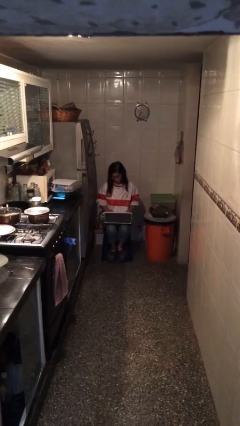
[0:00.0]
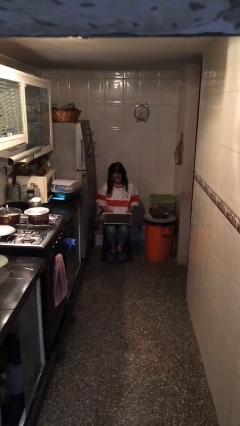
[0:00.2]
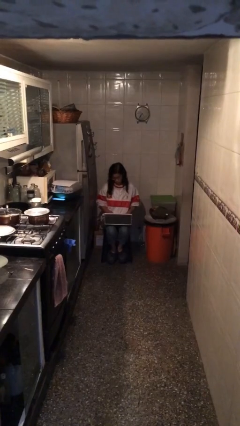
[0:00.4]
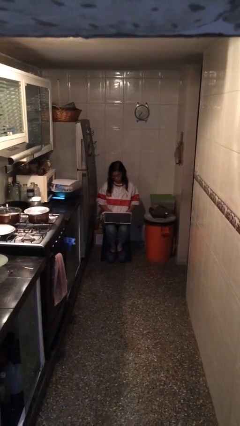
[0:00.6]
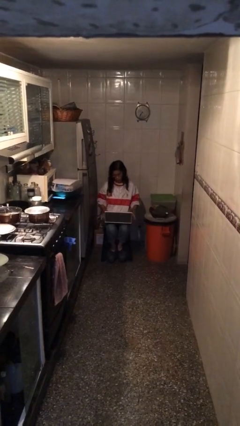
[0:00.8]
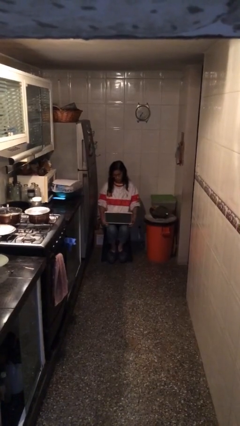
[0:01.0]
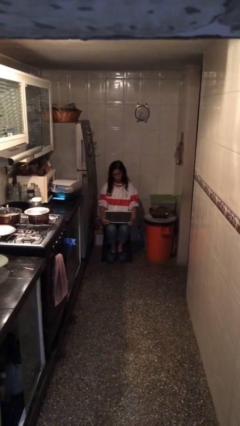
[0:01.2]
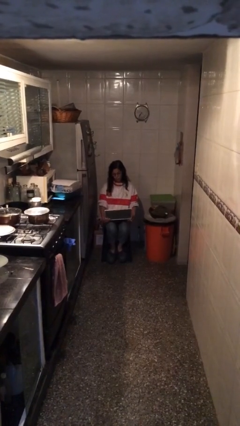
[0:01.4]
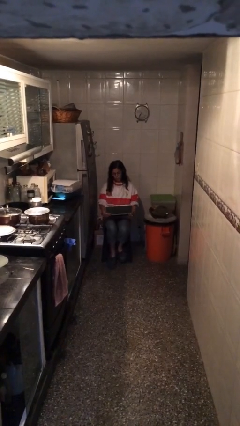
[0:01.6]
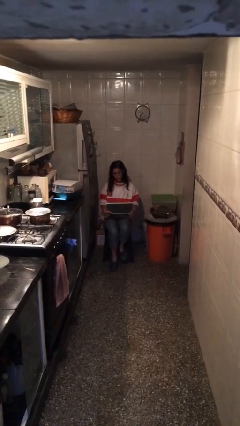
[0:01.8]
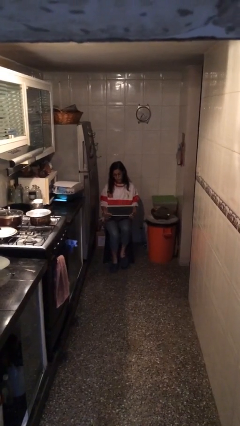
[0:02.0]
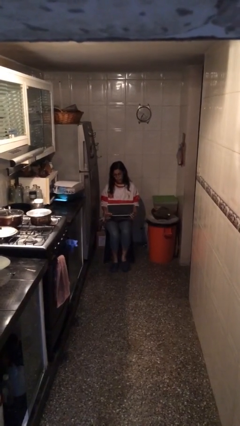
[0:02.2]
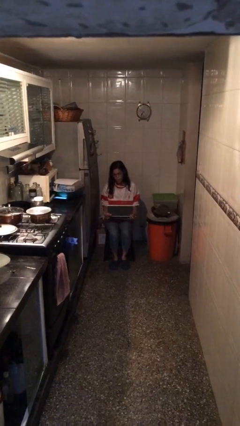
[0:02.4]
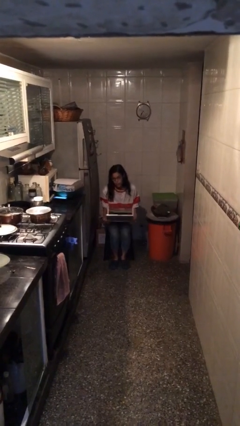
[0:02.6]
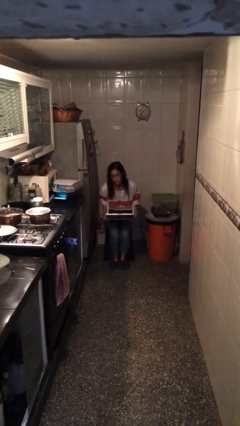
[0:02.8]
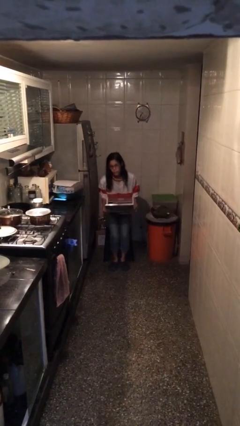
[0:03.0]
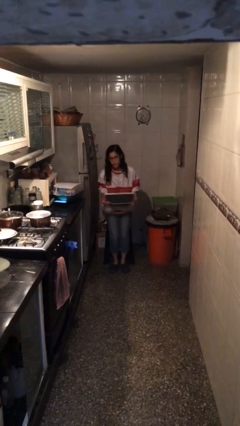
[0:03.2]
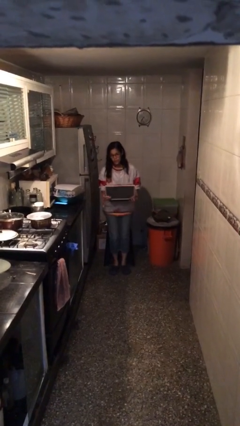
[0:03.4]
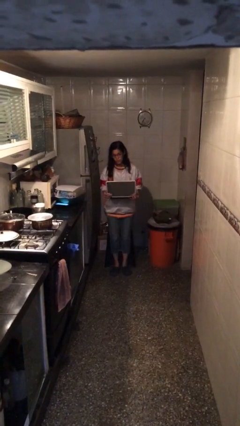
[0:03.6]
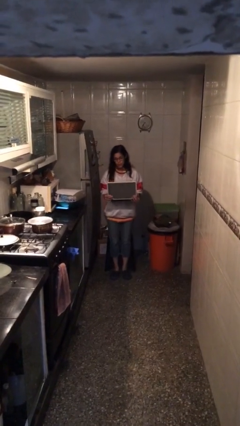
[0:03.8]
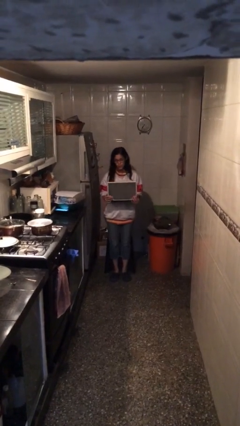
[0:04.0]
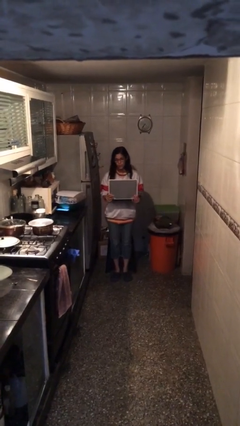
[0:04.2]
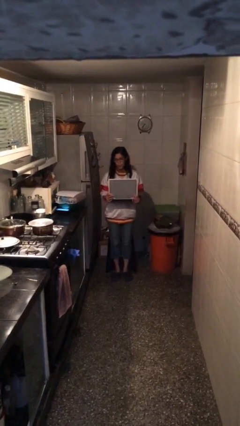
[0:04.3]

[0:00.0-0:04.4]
person stands up

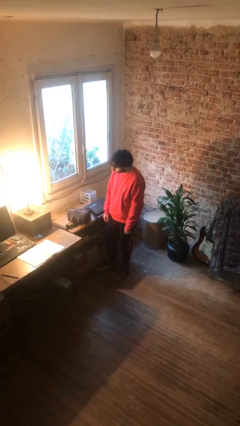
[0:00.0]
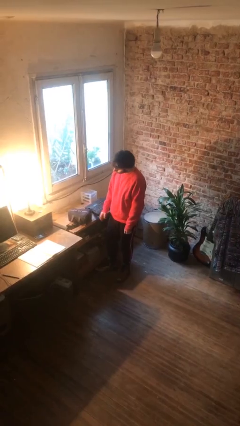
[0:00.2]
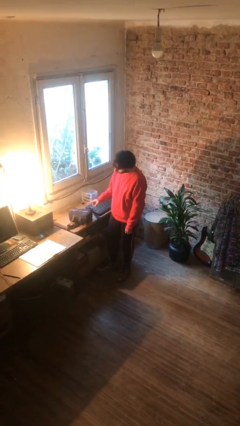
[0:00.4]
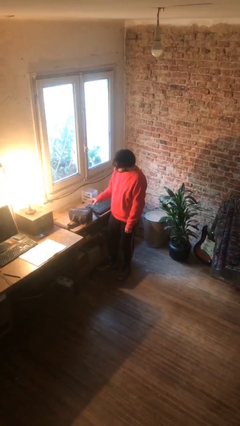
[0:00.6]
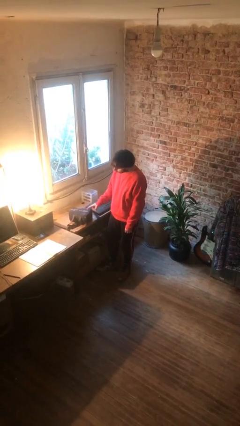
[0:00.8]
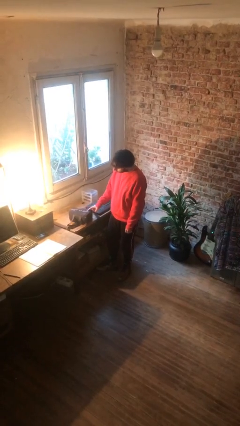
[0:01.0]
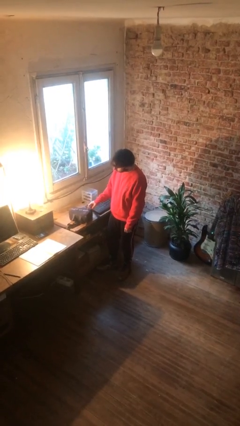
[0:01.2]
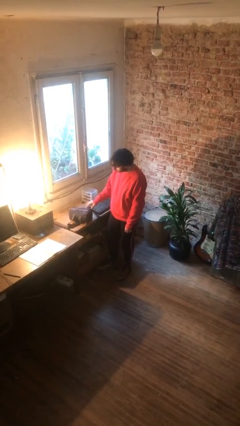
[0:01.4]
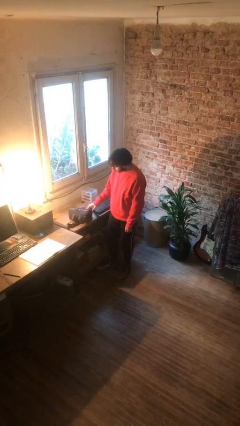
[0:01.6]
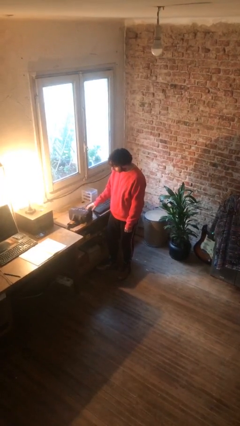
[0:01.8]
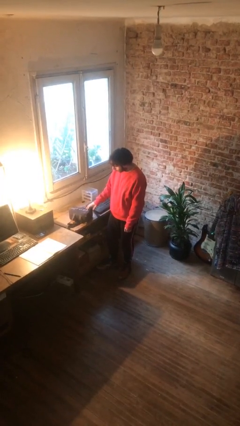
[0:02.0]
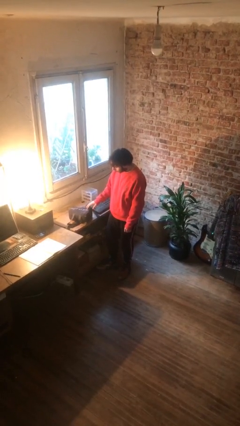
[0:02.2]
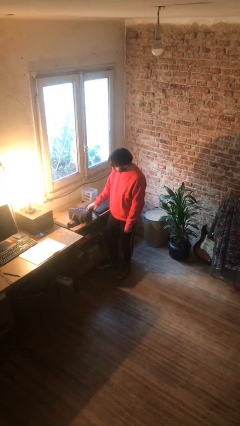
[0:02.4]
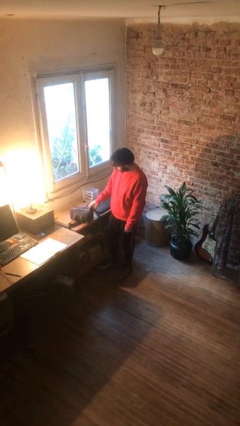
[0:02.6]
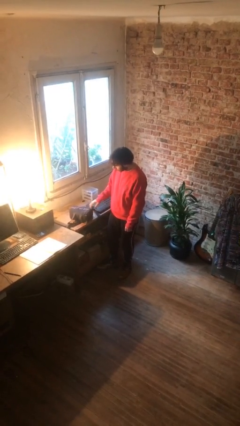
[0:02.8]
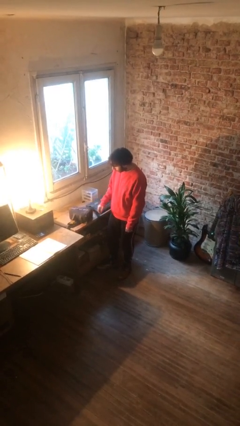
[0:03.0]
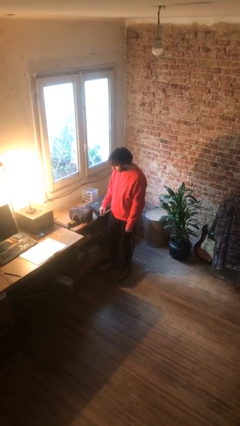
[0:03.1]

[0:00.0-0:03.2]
person taps object with finger

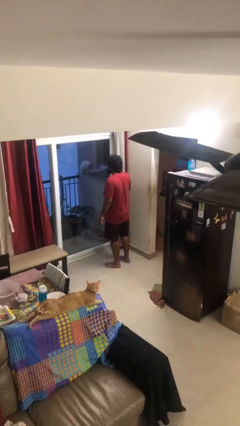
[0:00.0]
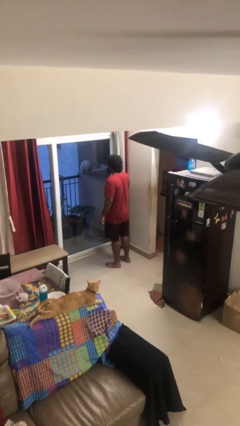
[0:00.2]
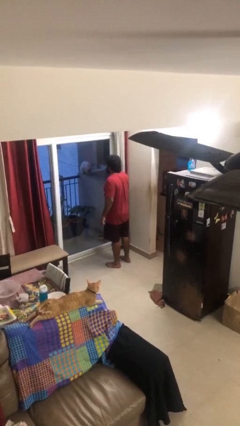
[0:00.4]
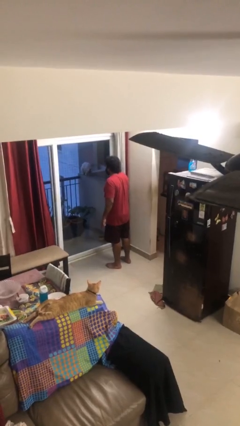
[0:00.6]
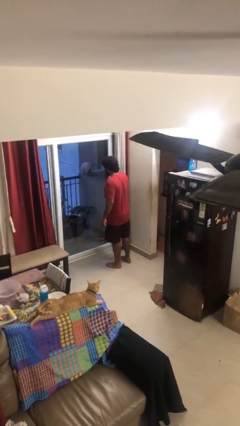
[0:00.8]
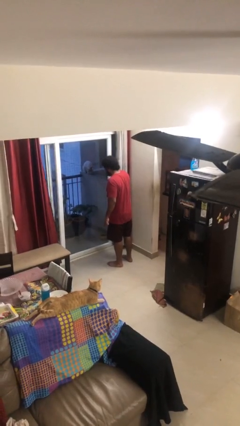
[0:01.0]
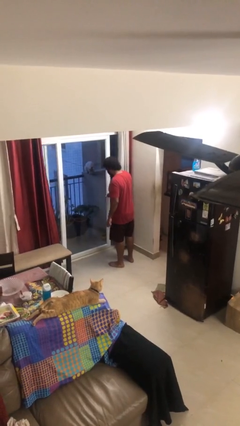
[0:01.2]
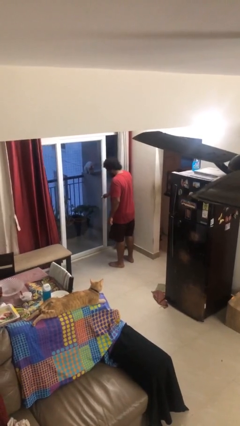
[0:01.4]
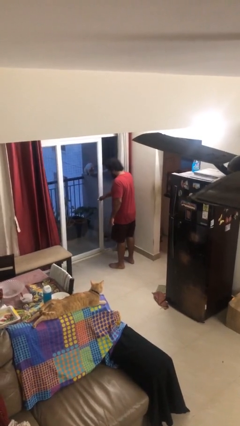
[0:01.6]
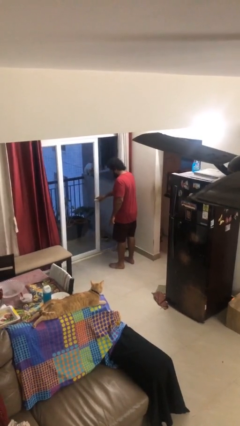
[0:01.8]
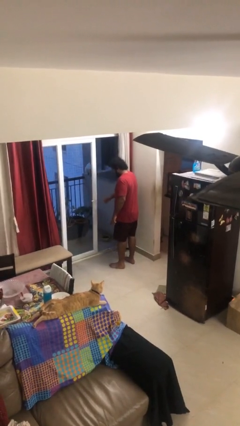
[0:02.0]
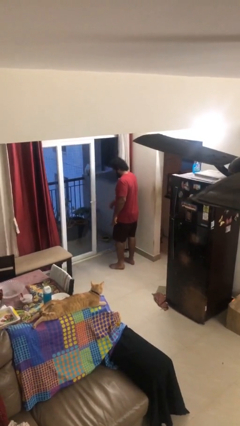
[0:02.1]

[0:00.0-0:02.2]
person opens facility door

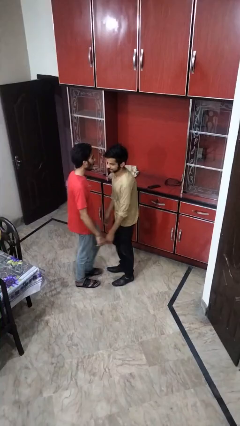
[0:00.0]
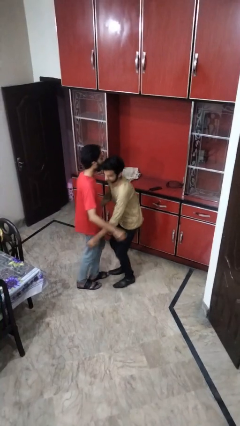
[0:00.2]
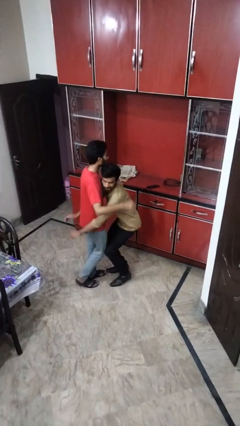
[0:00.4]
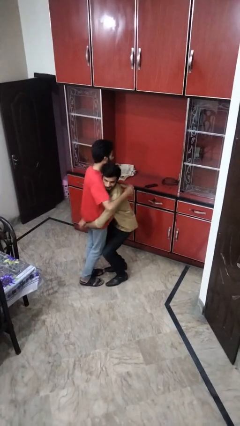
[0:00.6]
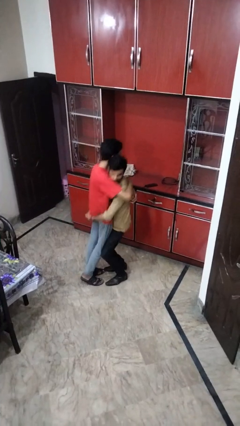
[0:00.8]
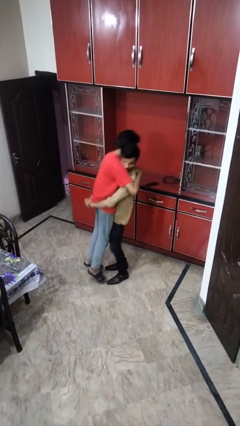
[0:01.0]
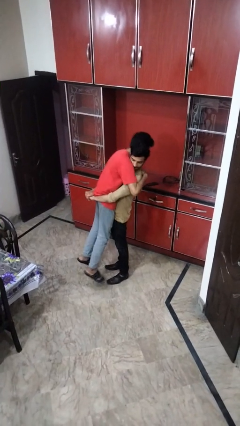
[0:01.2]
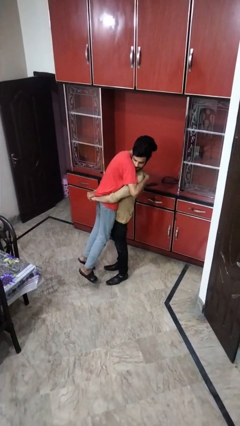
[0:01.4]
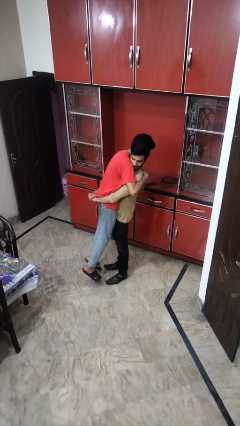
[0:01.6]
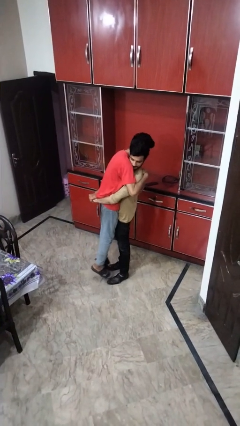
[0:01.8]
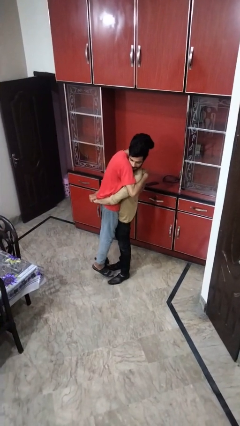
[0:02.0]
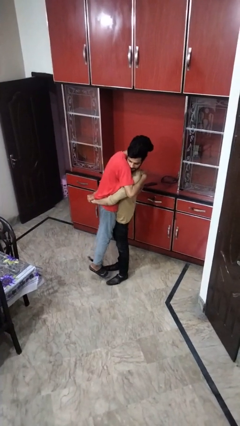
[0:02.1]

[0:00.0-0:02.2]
person picks up person

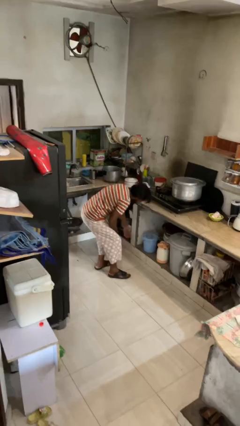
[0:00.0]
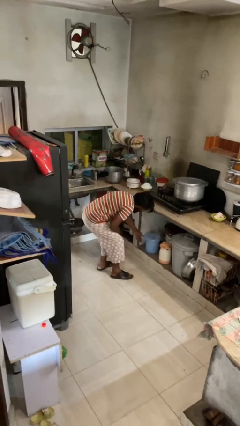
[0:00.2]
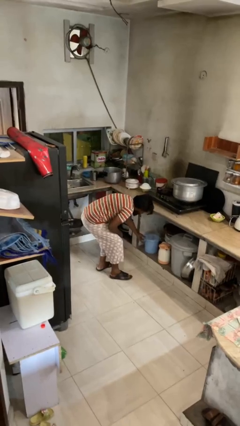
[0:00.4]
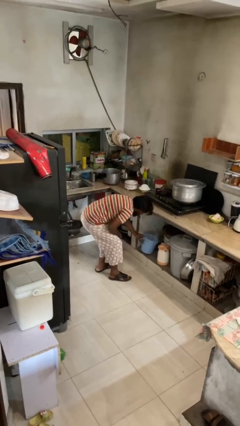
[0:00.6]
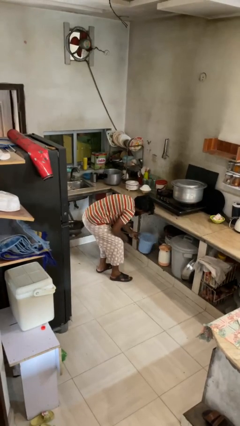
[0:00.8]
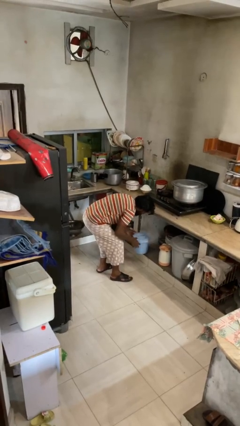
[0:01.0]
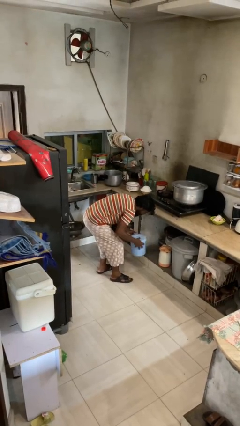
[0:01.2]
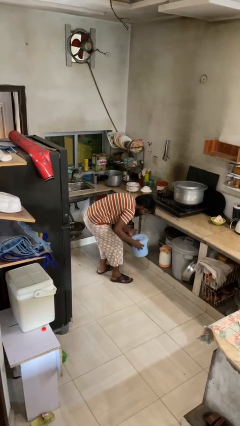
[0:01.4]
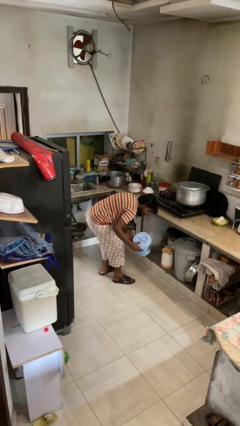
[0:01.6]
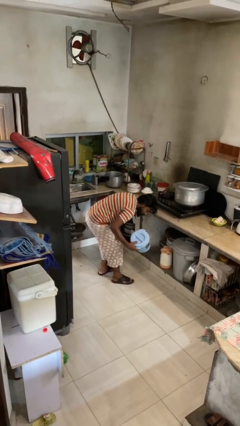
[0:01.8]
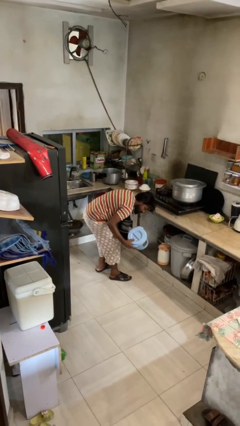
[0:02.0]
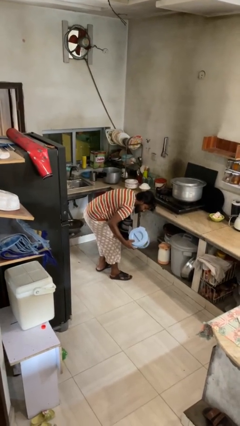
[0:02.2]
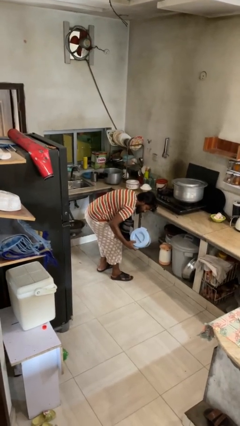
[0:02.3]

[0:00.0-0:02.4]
person picks up object from cabinet

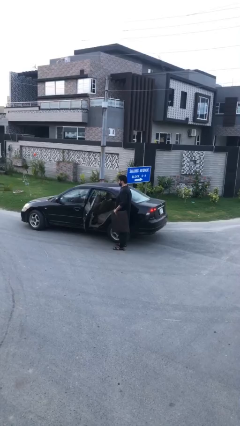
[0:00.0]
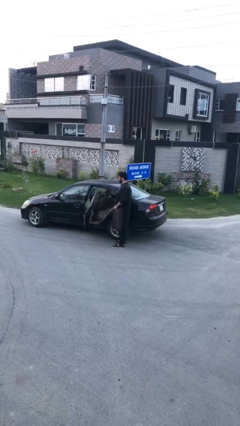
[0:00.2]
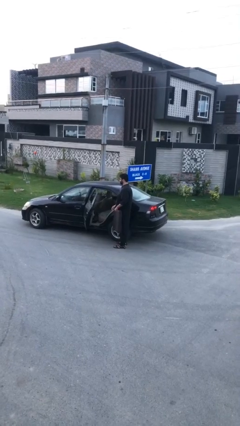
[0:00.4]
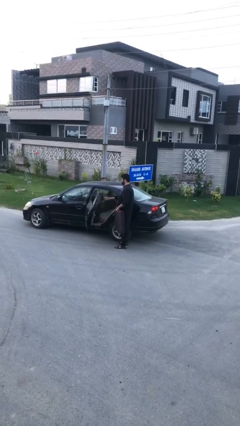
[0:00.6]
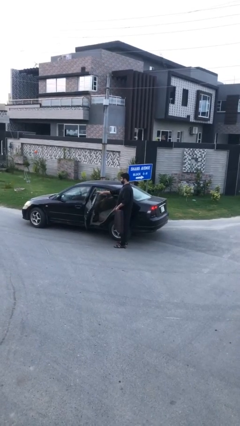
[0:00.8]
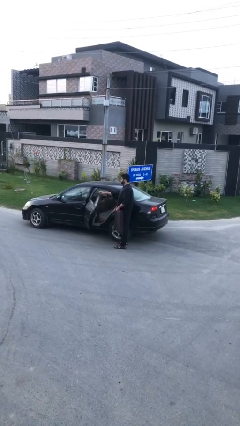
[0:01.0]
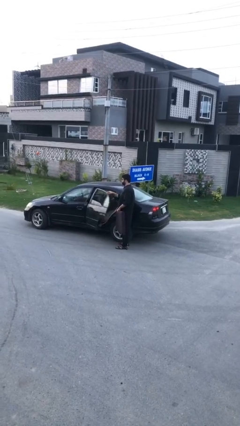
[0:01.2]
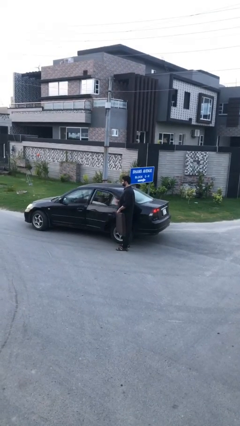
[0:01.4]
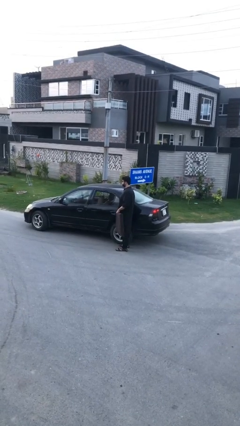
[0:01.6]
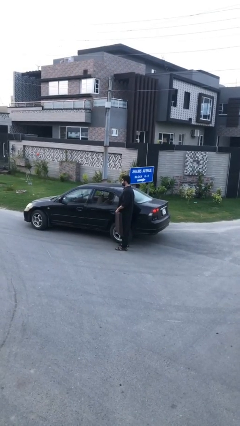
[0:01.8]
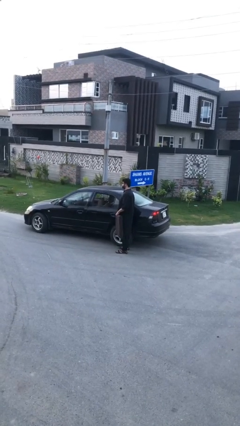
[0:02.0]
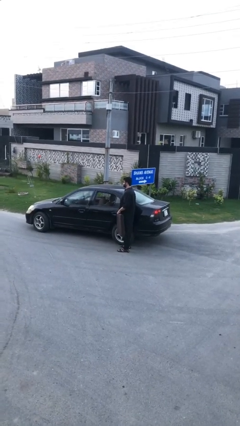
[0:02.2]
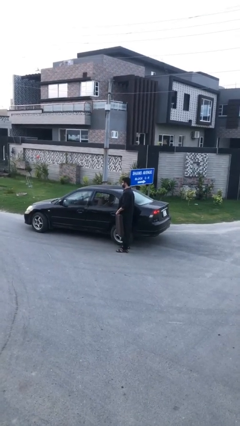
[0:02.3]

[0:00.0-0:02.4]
person closes car door

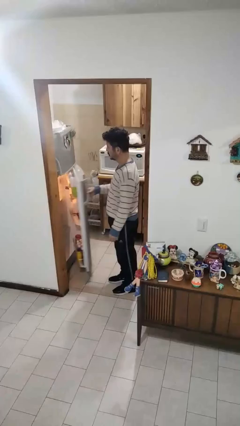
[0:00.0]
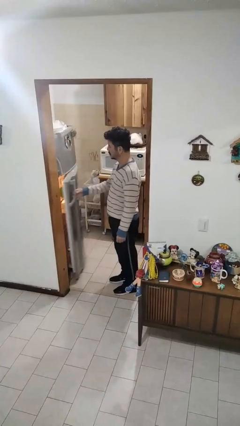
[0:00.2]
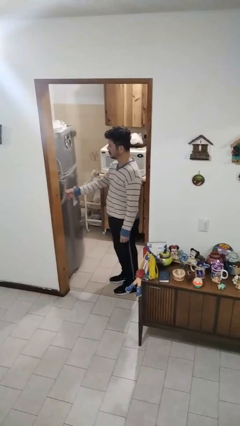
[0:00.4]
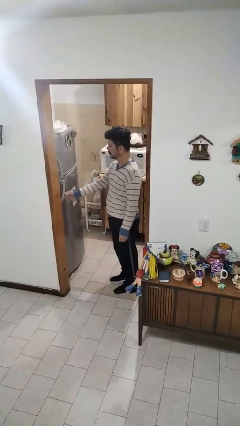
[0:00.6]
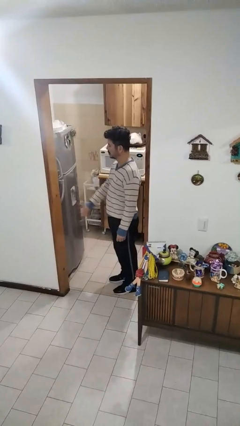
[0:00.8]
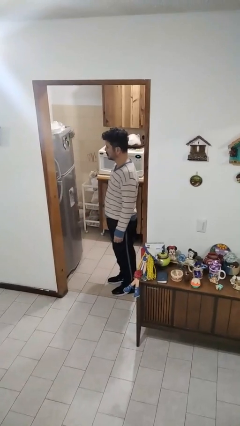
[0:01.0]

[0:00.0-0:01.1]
person closes refrigerator
